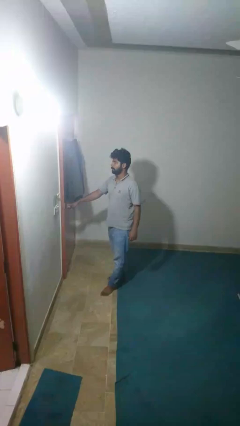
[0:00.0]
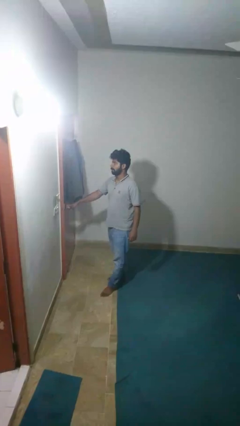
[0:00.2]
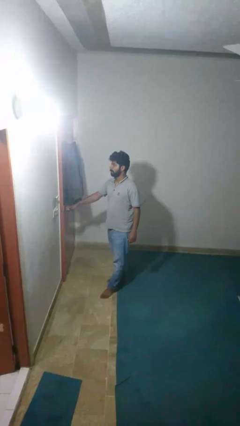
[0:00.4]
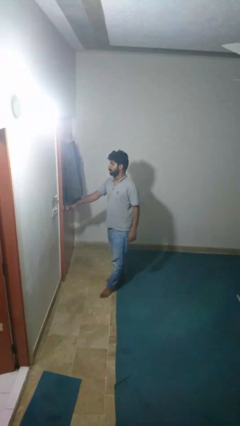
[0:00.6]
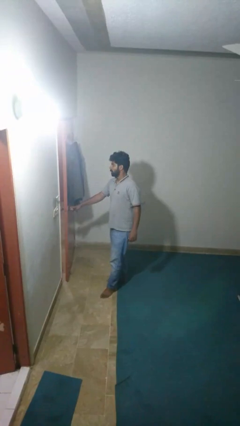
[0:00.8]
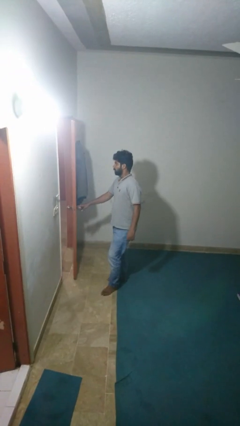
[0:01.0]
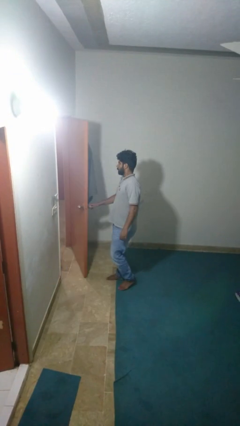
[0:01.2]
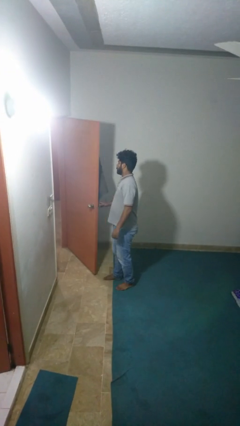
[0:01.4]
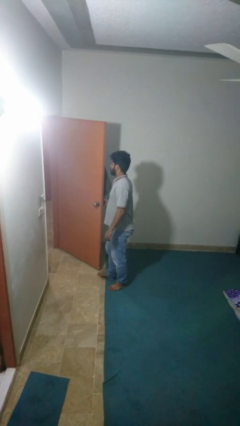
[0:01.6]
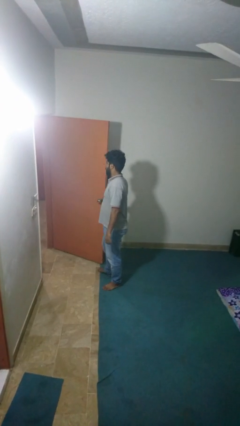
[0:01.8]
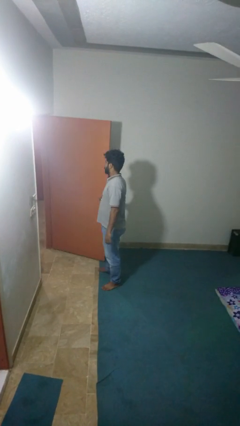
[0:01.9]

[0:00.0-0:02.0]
person opens facility door

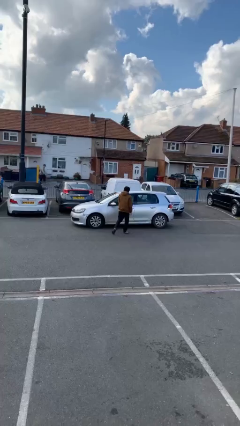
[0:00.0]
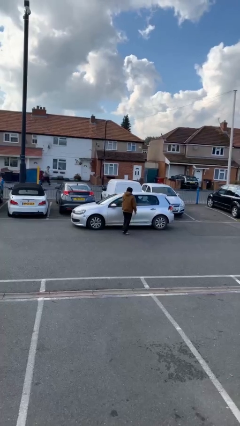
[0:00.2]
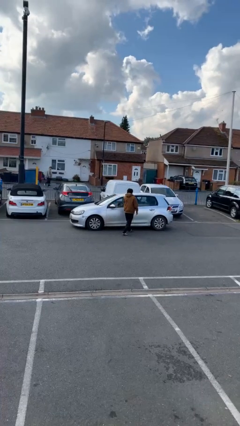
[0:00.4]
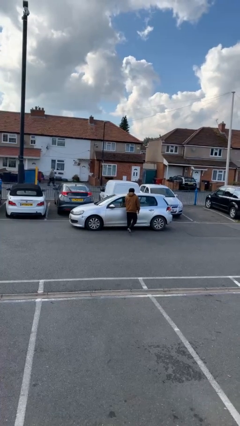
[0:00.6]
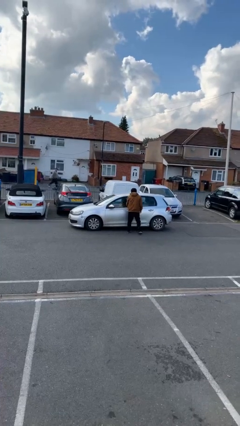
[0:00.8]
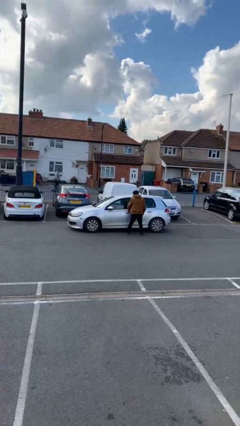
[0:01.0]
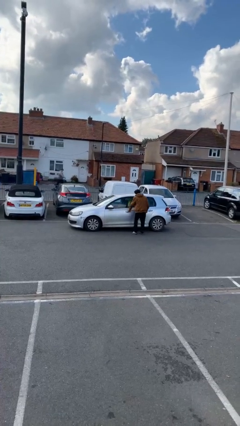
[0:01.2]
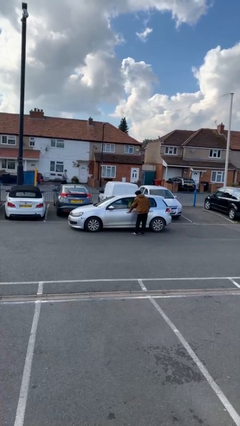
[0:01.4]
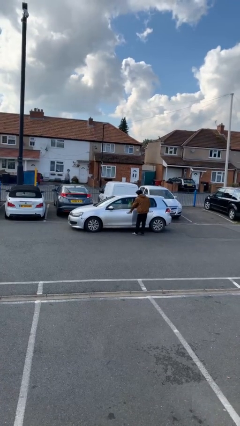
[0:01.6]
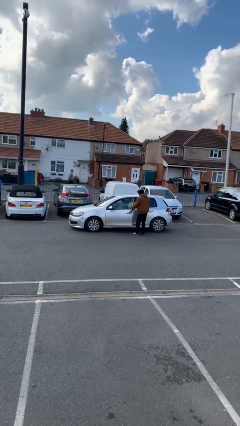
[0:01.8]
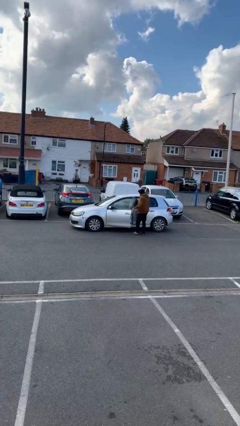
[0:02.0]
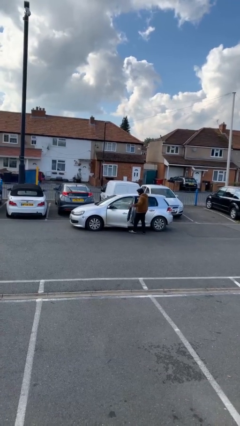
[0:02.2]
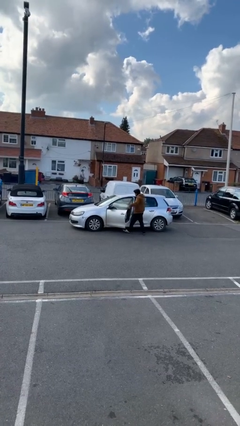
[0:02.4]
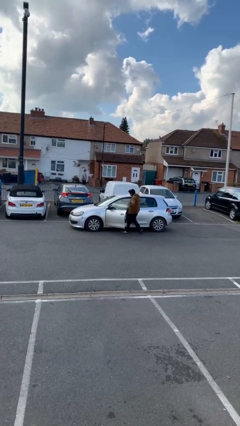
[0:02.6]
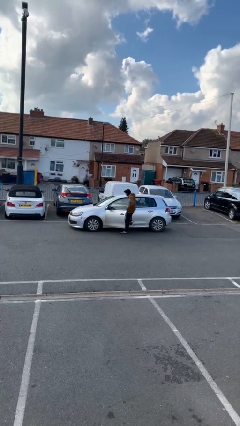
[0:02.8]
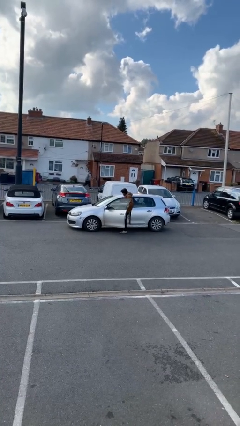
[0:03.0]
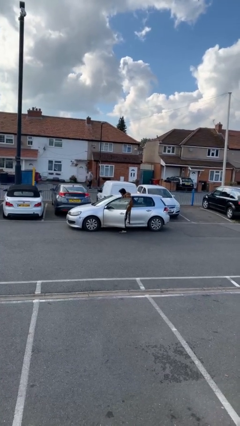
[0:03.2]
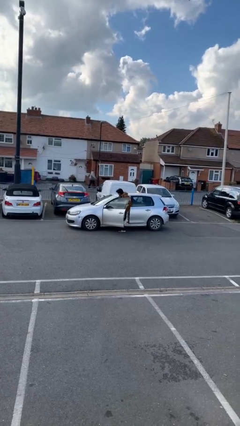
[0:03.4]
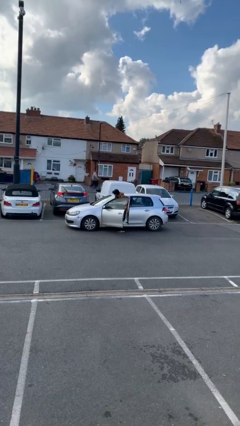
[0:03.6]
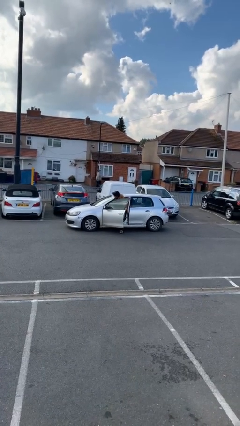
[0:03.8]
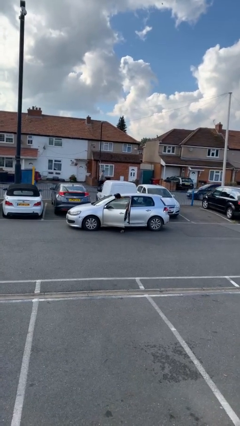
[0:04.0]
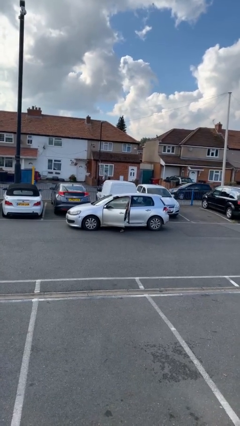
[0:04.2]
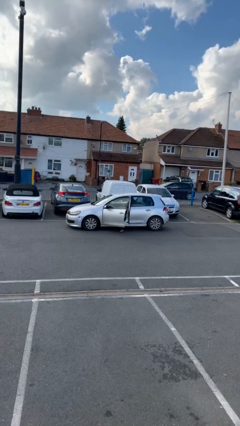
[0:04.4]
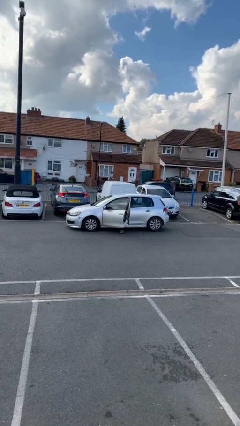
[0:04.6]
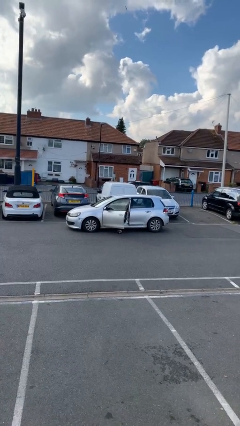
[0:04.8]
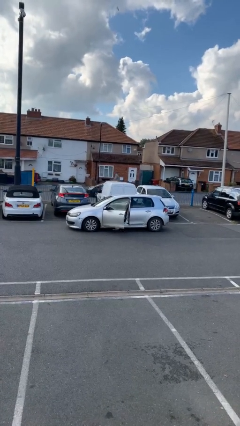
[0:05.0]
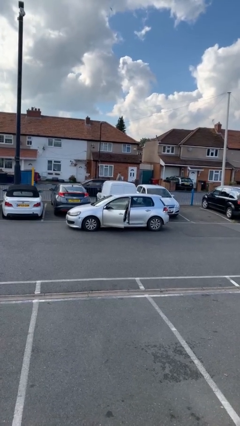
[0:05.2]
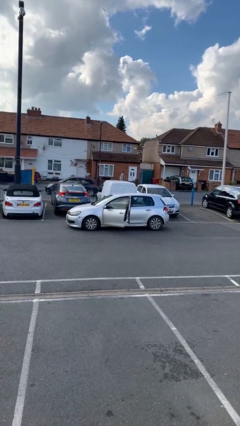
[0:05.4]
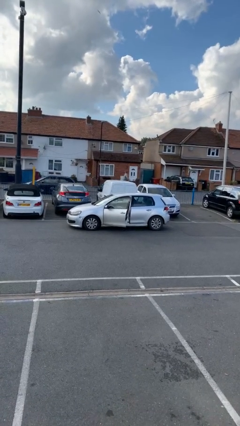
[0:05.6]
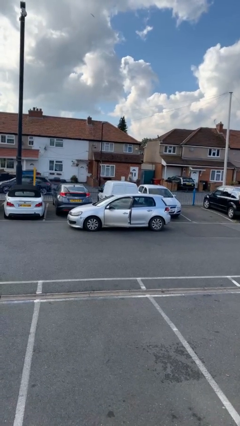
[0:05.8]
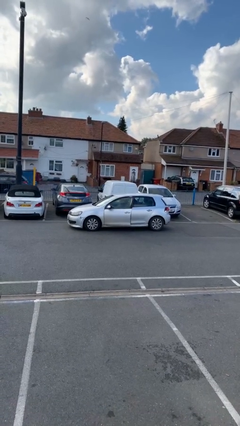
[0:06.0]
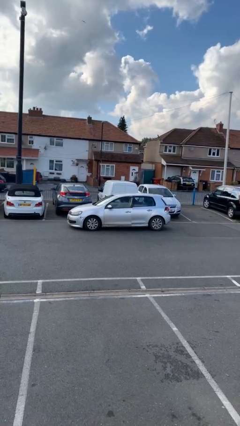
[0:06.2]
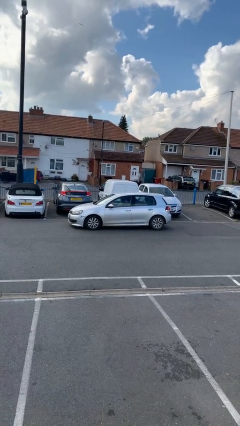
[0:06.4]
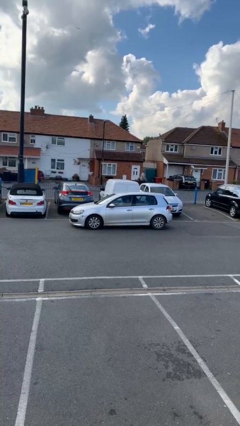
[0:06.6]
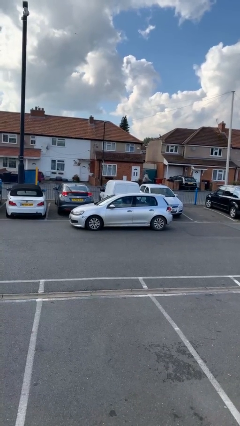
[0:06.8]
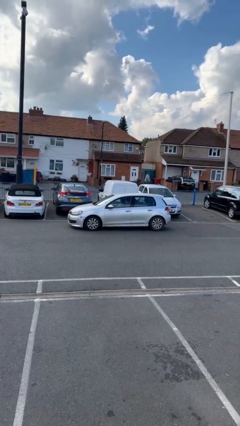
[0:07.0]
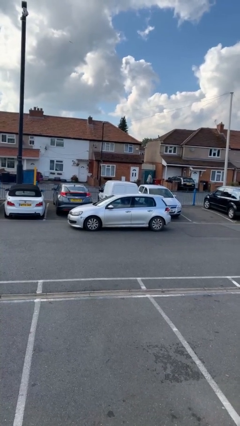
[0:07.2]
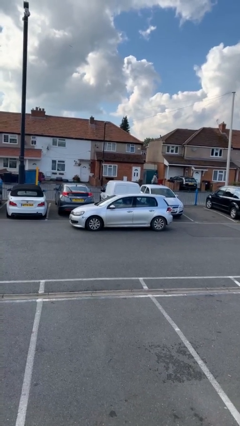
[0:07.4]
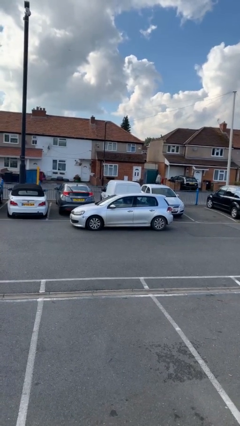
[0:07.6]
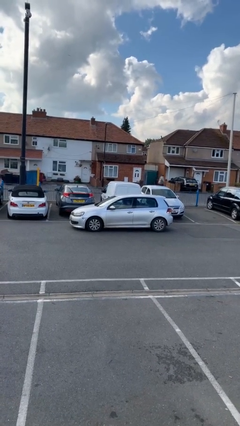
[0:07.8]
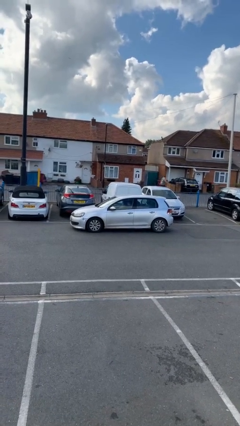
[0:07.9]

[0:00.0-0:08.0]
car picks up person

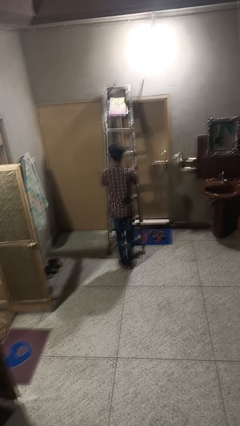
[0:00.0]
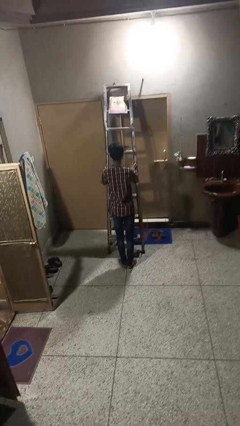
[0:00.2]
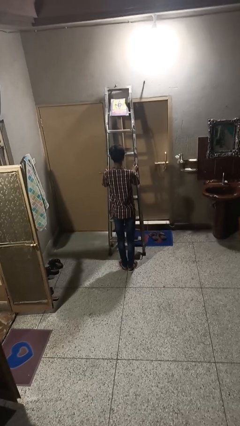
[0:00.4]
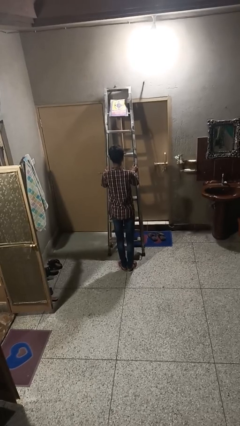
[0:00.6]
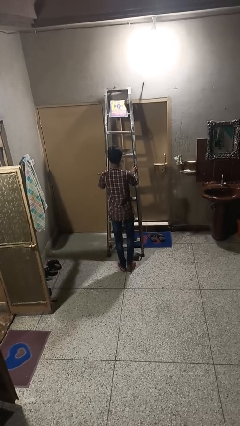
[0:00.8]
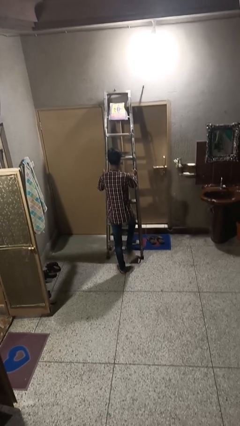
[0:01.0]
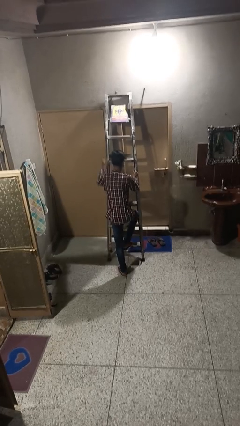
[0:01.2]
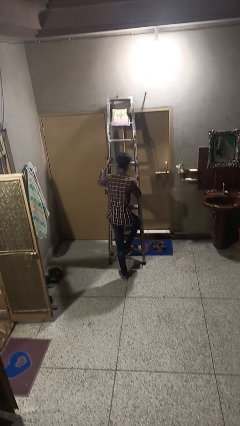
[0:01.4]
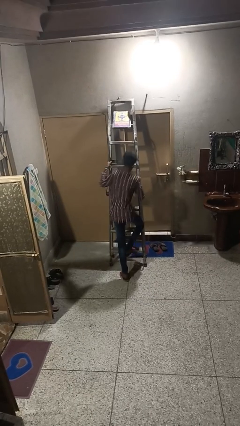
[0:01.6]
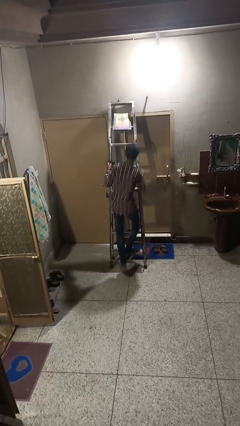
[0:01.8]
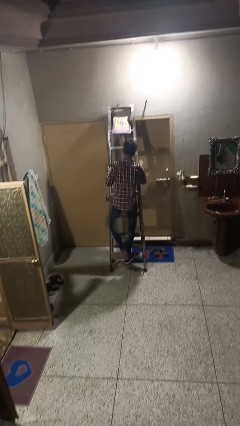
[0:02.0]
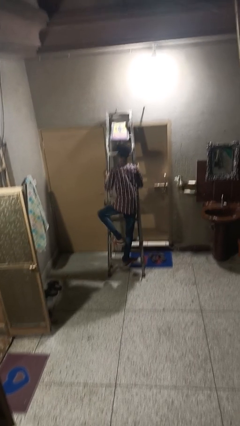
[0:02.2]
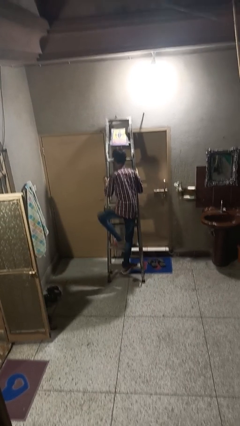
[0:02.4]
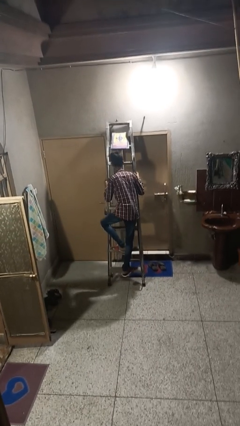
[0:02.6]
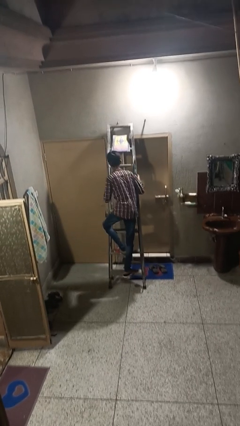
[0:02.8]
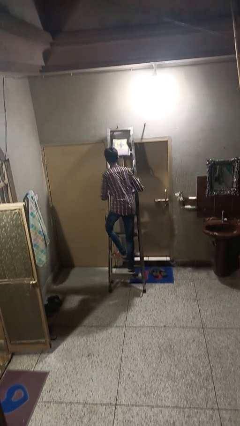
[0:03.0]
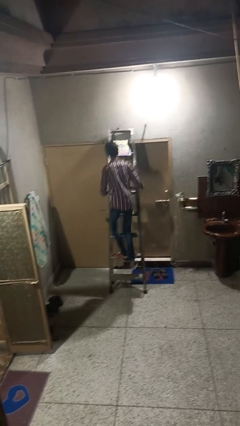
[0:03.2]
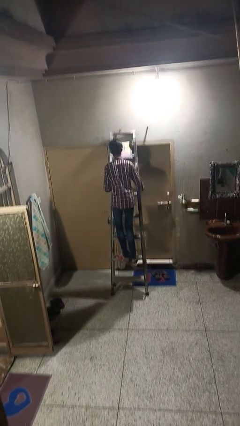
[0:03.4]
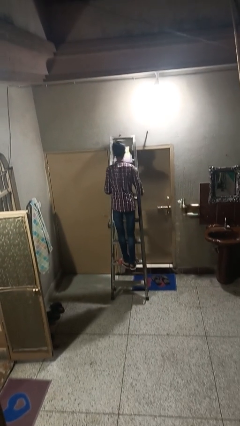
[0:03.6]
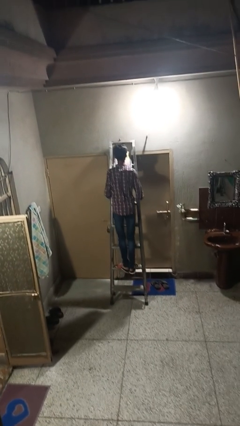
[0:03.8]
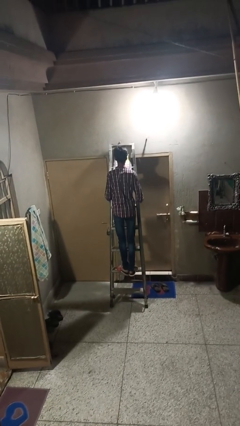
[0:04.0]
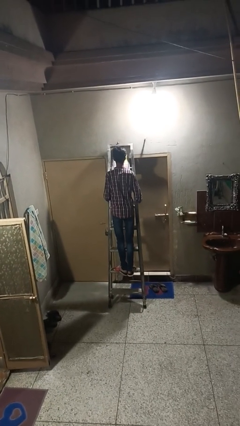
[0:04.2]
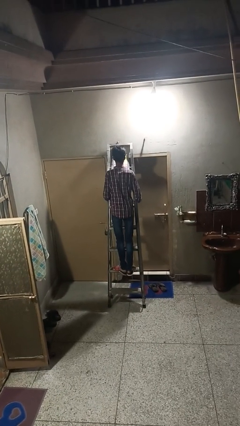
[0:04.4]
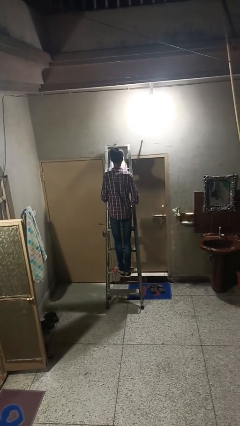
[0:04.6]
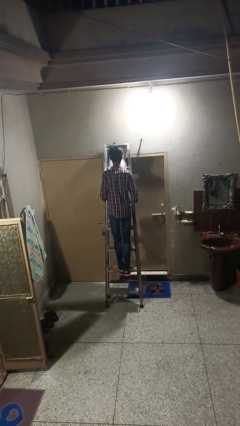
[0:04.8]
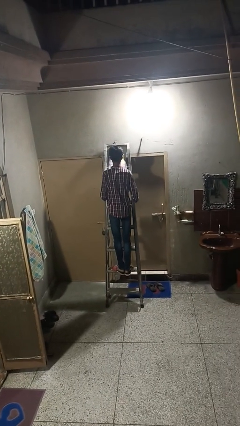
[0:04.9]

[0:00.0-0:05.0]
person climbs up ladder

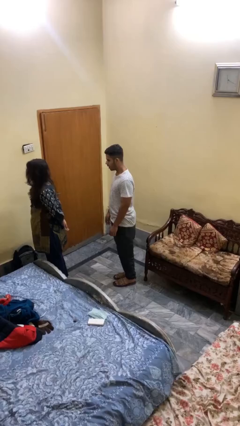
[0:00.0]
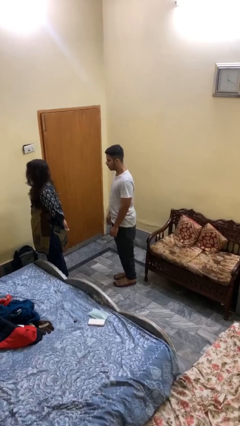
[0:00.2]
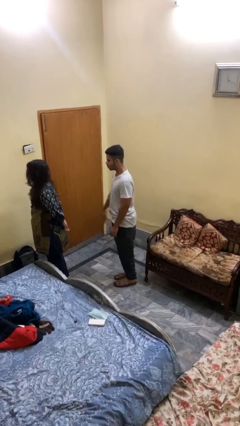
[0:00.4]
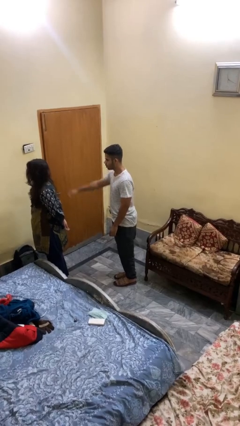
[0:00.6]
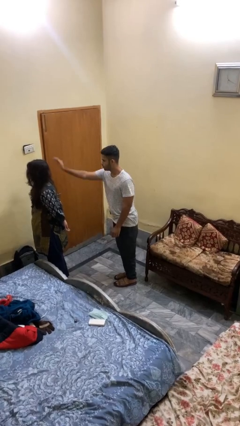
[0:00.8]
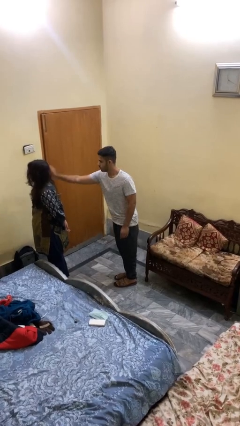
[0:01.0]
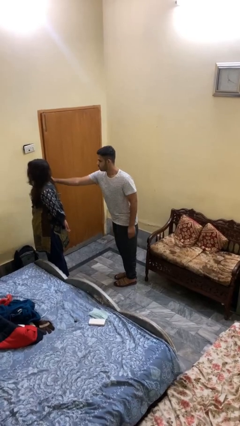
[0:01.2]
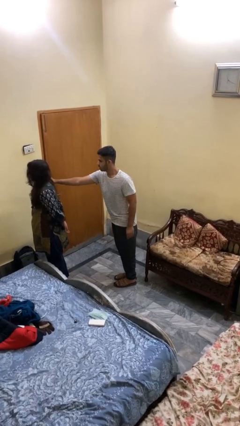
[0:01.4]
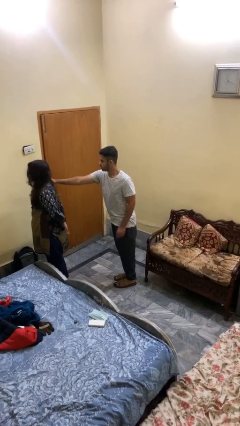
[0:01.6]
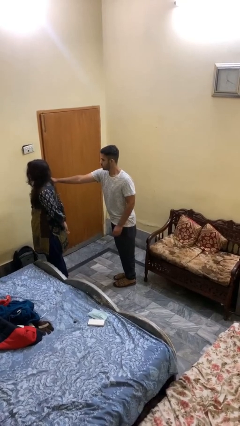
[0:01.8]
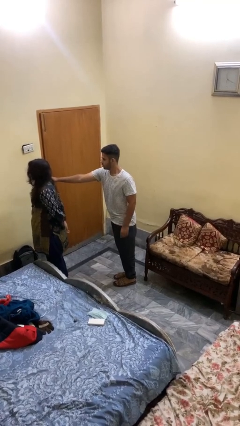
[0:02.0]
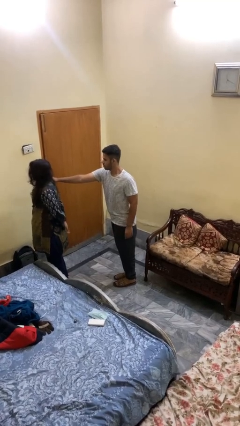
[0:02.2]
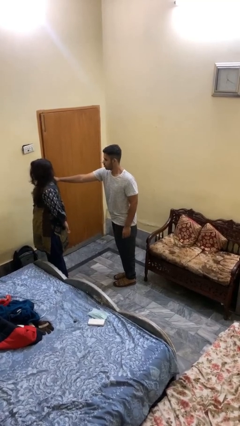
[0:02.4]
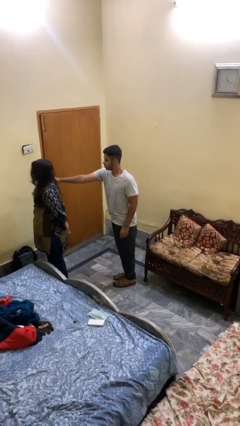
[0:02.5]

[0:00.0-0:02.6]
person grabs person by shoulder

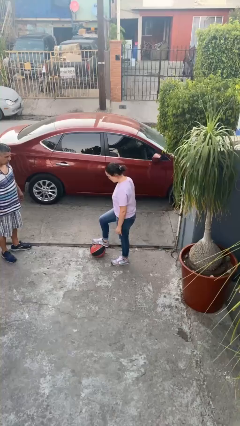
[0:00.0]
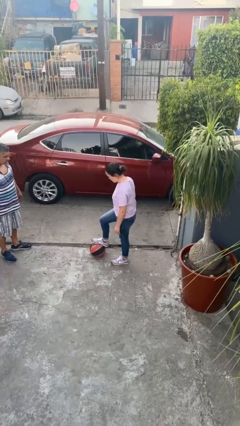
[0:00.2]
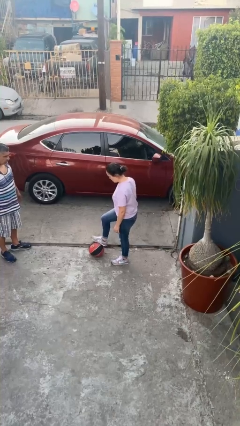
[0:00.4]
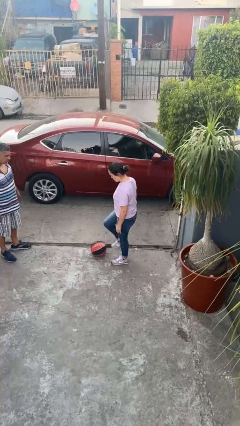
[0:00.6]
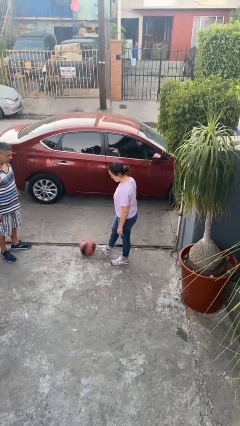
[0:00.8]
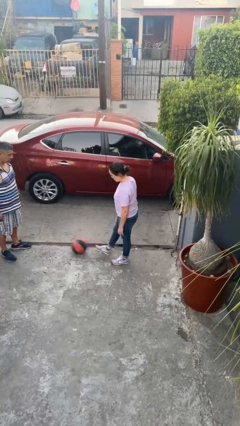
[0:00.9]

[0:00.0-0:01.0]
person kicks object to person
